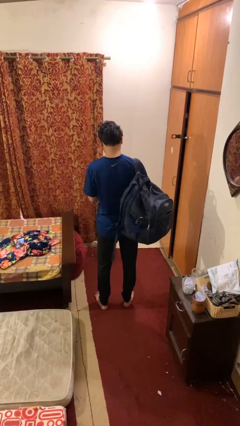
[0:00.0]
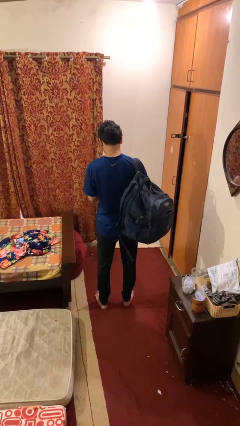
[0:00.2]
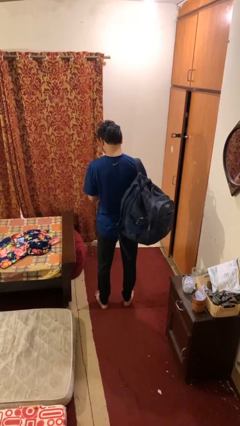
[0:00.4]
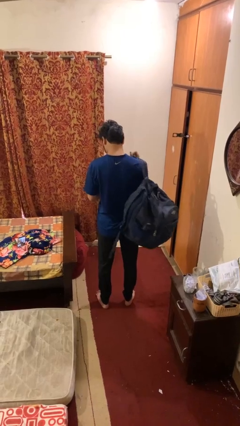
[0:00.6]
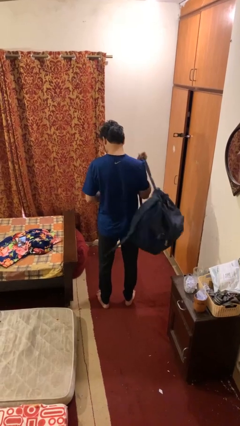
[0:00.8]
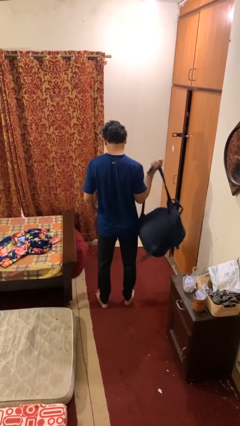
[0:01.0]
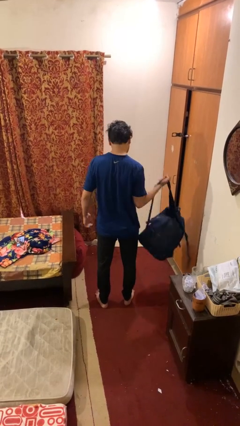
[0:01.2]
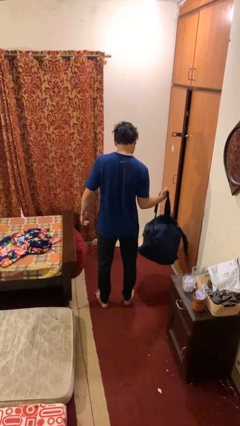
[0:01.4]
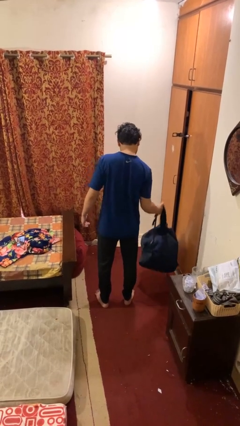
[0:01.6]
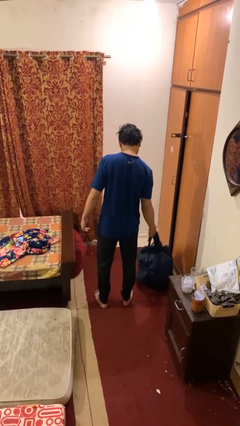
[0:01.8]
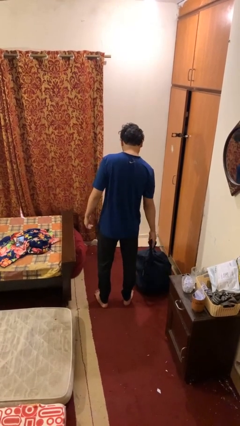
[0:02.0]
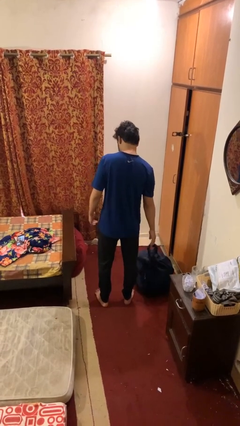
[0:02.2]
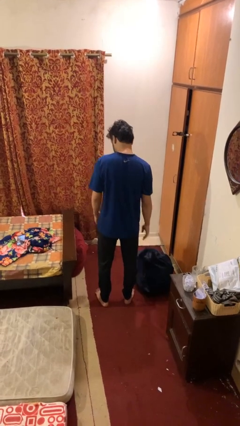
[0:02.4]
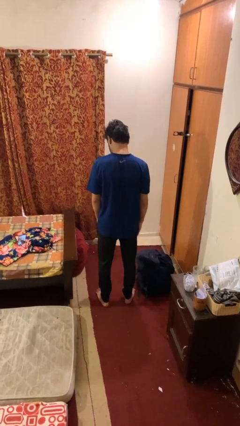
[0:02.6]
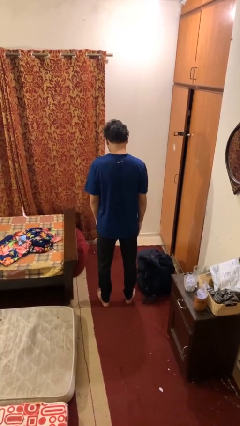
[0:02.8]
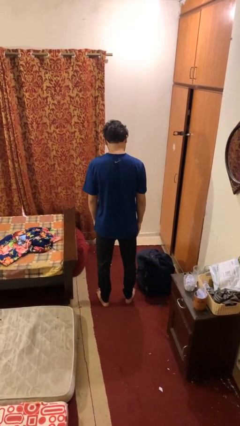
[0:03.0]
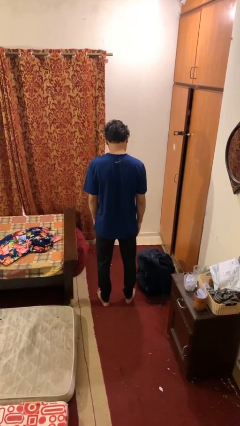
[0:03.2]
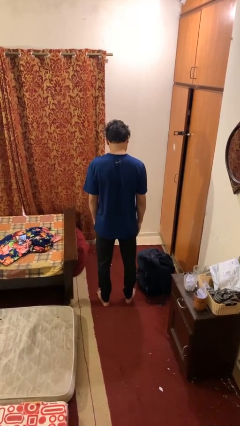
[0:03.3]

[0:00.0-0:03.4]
person takes off backpack

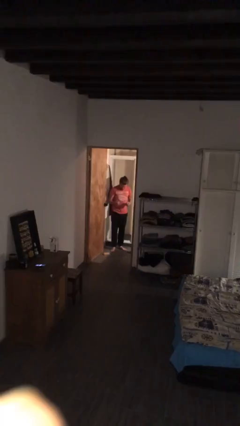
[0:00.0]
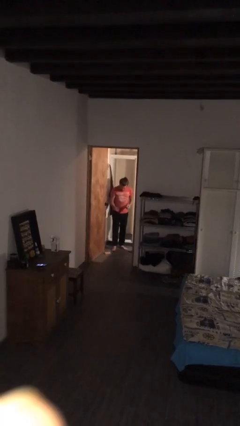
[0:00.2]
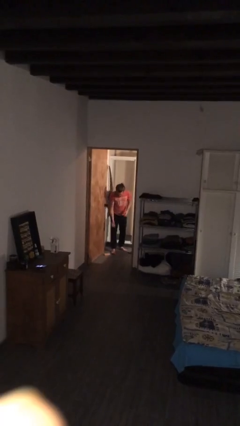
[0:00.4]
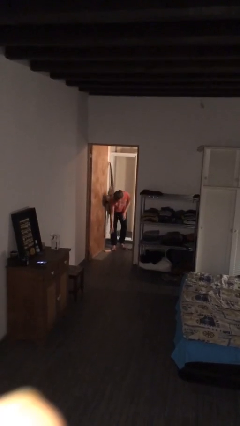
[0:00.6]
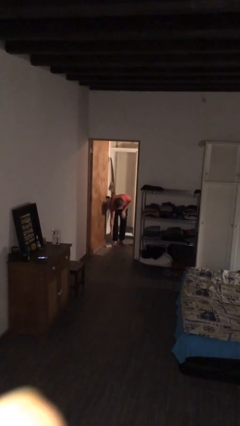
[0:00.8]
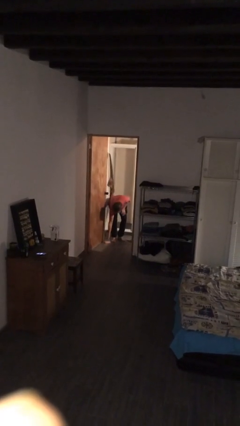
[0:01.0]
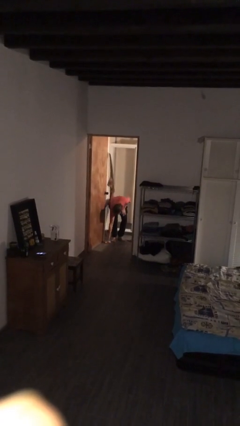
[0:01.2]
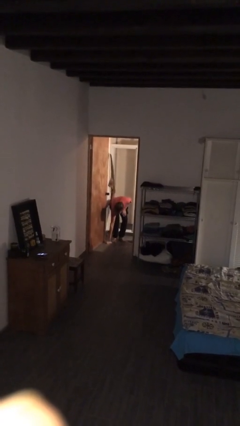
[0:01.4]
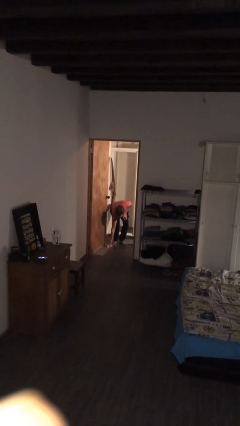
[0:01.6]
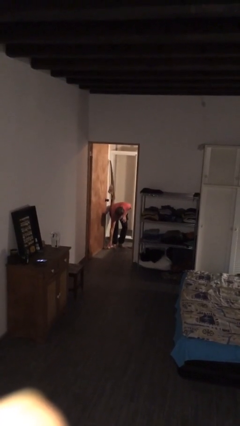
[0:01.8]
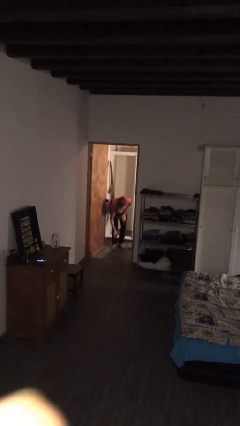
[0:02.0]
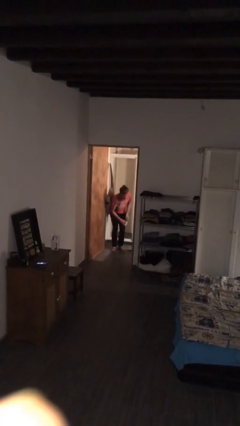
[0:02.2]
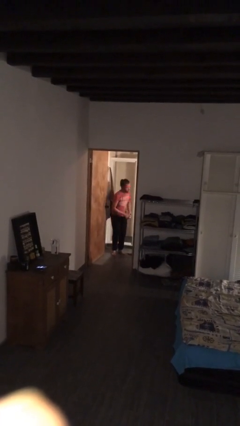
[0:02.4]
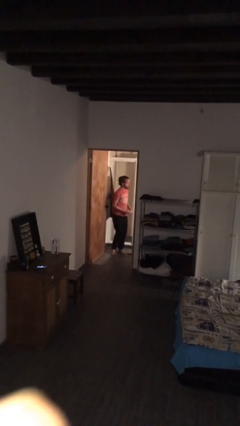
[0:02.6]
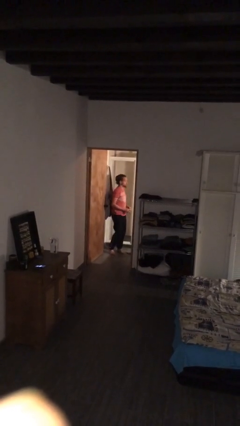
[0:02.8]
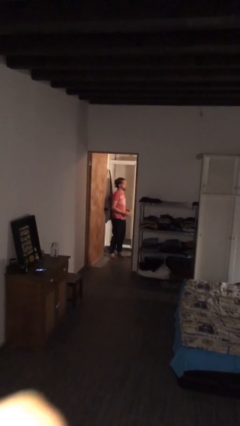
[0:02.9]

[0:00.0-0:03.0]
person picks up object from floor

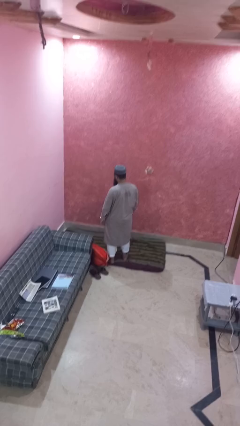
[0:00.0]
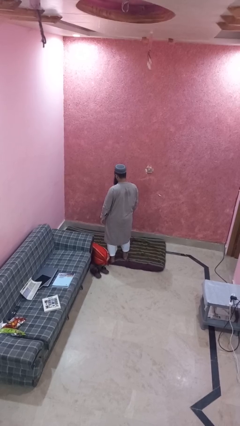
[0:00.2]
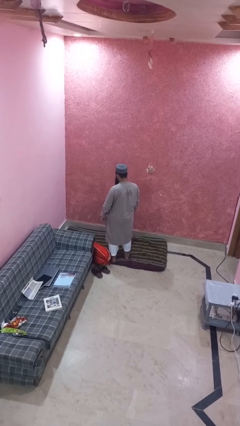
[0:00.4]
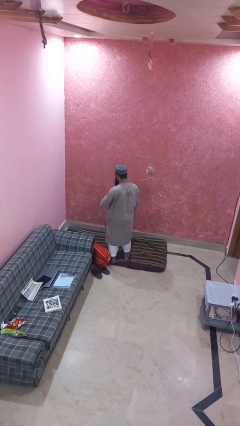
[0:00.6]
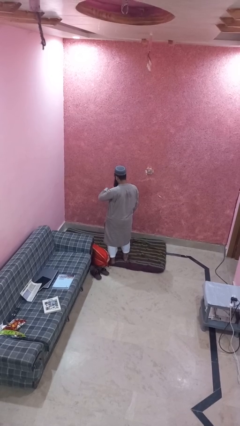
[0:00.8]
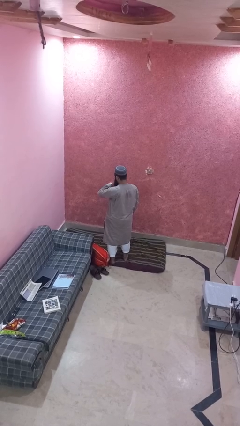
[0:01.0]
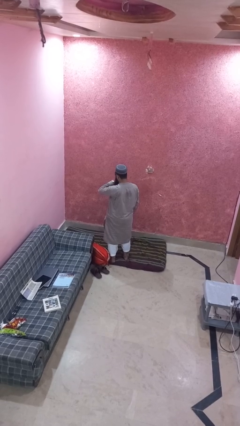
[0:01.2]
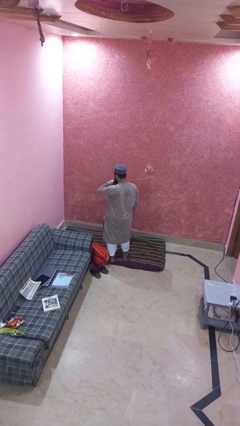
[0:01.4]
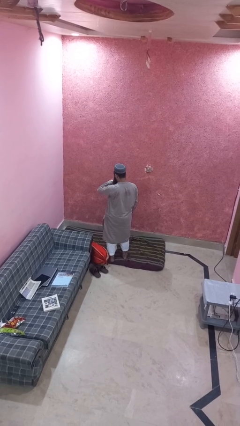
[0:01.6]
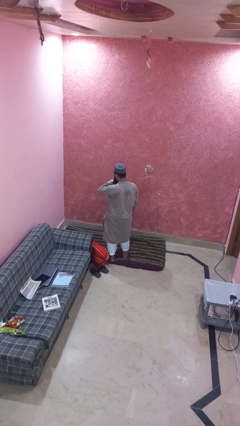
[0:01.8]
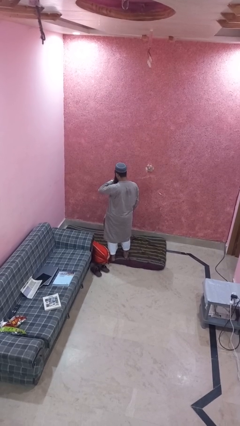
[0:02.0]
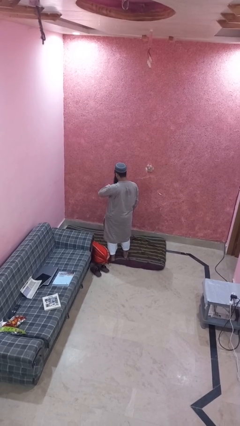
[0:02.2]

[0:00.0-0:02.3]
person looks at wristwatch

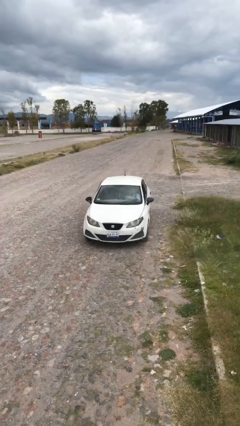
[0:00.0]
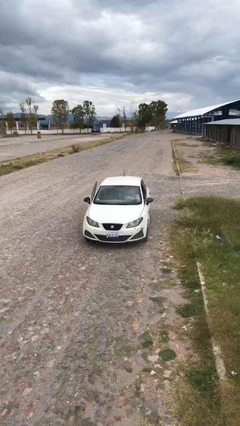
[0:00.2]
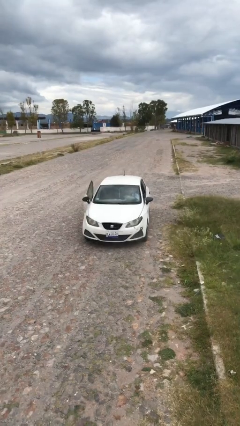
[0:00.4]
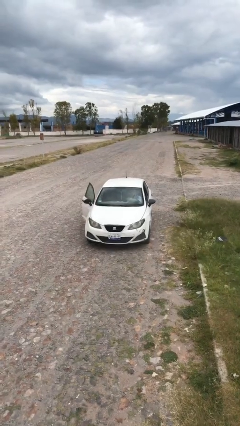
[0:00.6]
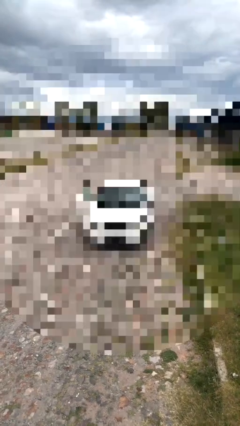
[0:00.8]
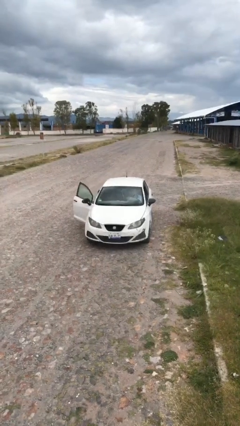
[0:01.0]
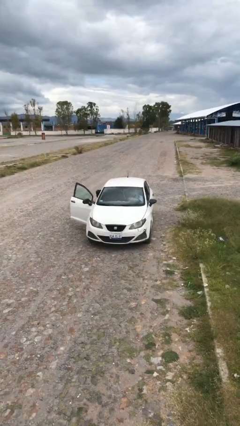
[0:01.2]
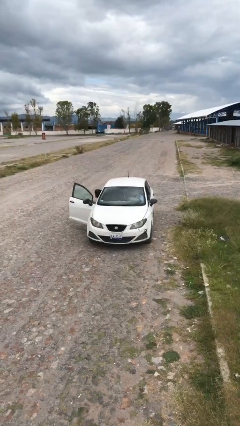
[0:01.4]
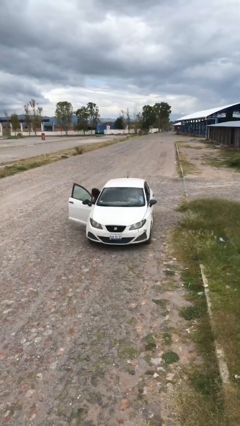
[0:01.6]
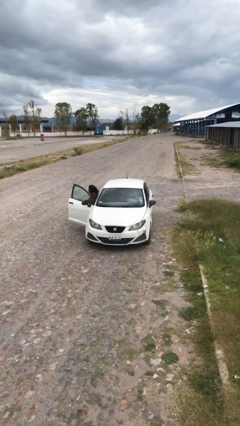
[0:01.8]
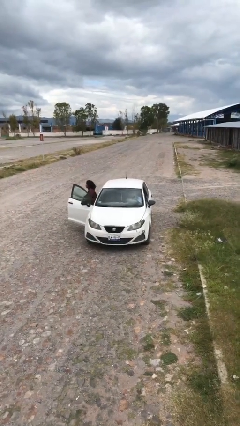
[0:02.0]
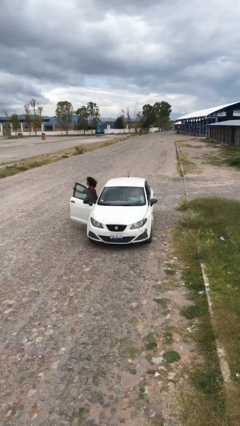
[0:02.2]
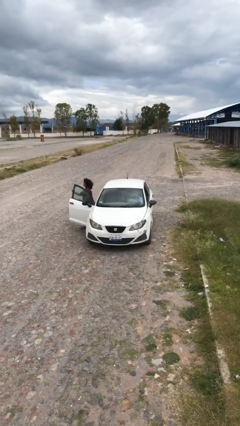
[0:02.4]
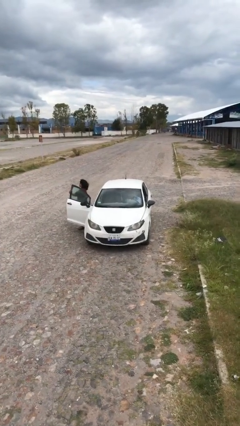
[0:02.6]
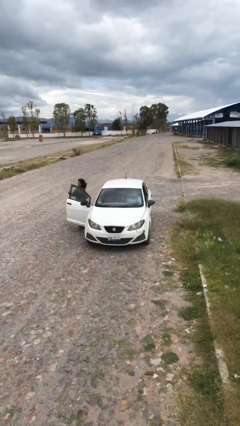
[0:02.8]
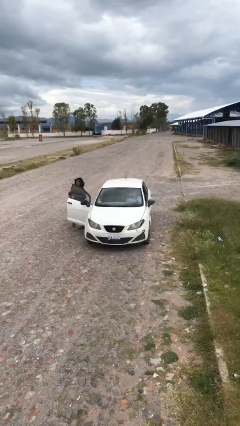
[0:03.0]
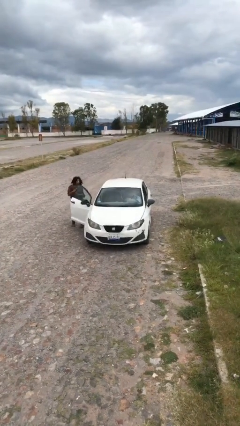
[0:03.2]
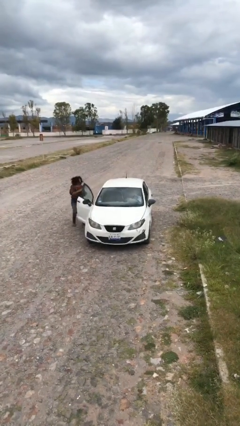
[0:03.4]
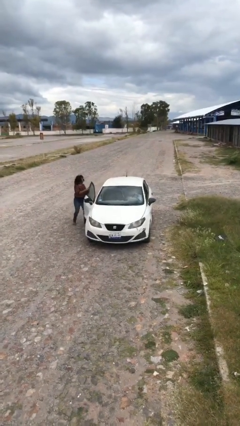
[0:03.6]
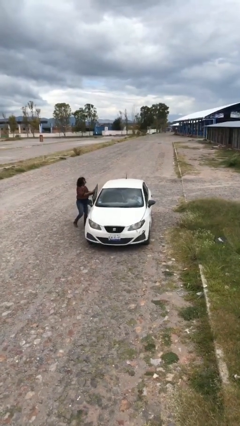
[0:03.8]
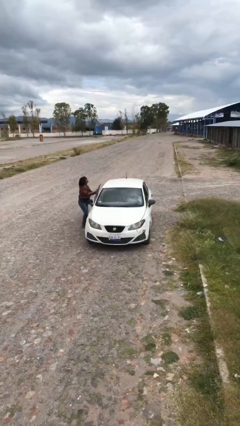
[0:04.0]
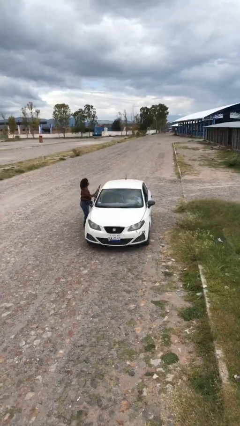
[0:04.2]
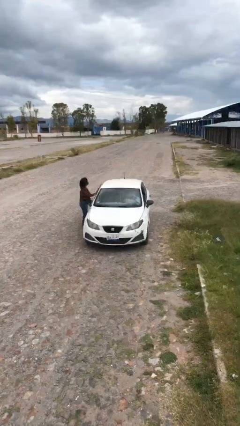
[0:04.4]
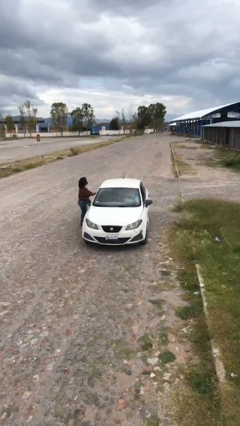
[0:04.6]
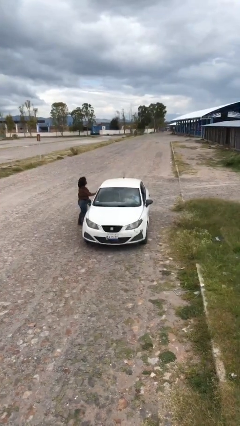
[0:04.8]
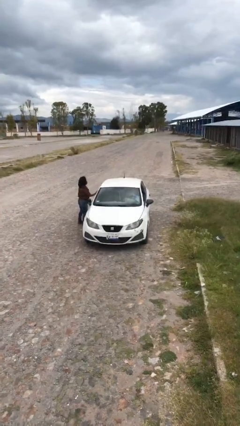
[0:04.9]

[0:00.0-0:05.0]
car drops off person

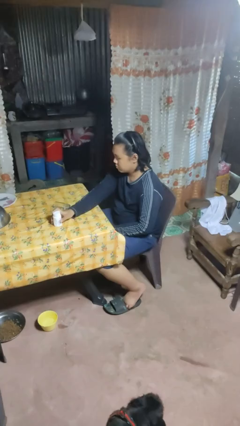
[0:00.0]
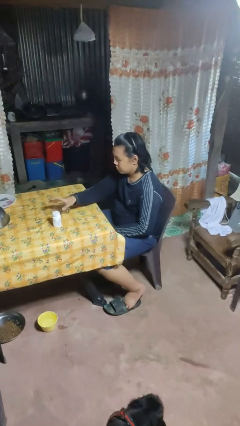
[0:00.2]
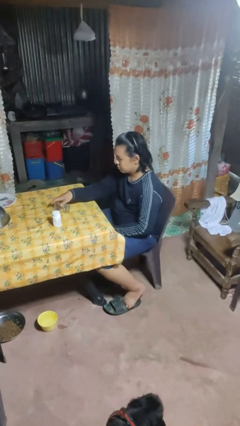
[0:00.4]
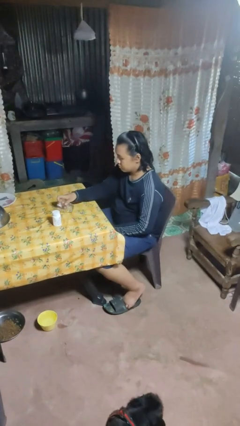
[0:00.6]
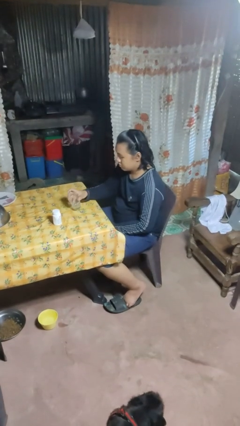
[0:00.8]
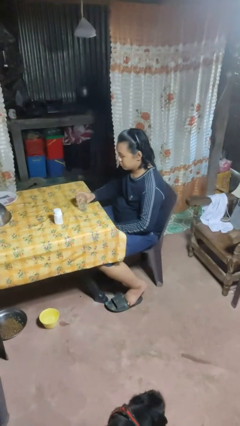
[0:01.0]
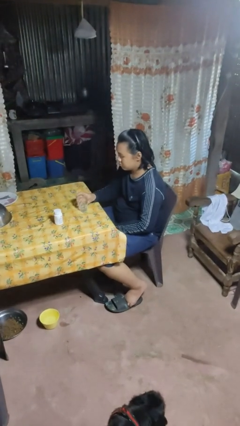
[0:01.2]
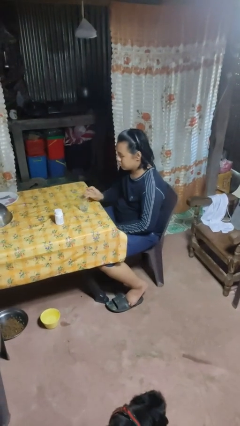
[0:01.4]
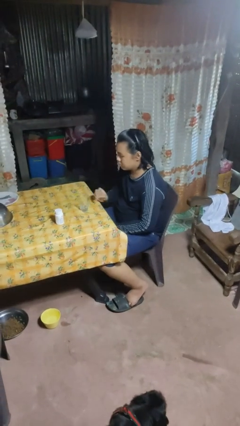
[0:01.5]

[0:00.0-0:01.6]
person sets upright glass

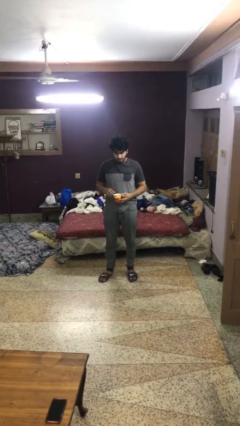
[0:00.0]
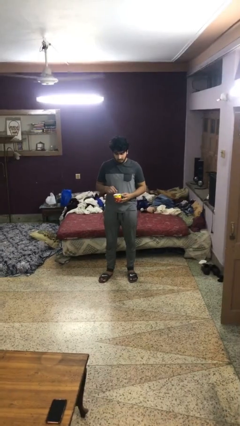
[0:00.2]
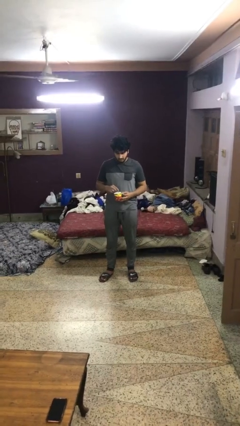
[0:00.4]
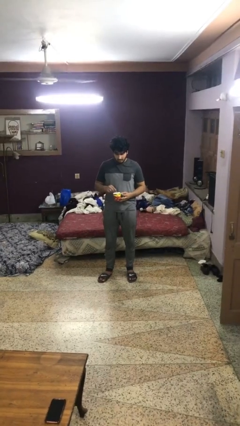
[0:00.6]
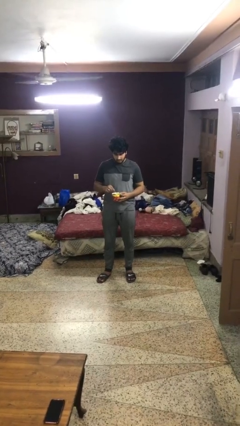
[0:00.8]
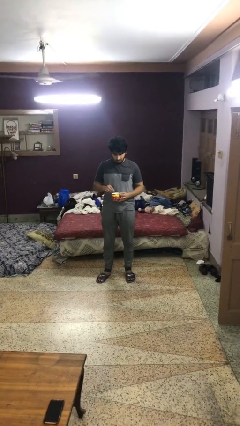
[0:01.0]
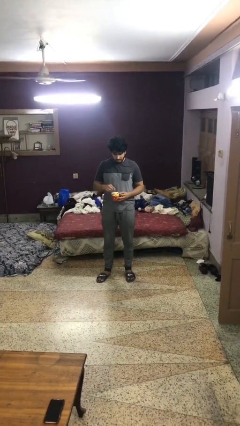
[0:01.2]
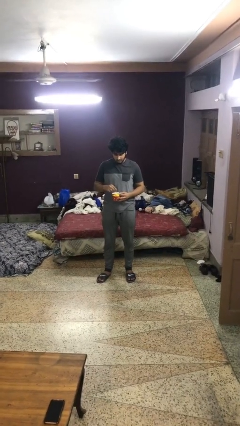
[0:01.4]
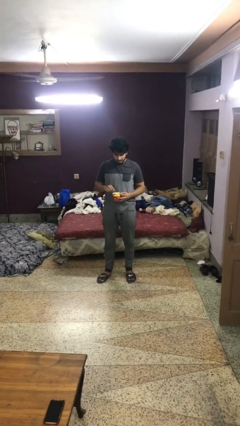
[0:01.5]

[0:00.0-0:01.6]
person stirs mug

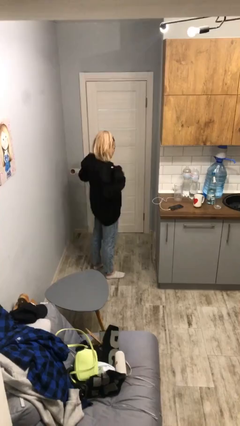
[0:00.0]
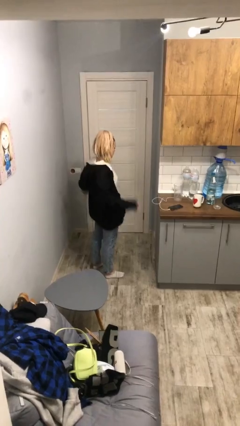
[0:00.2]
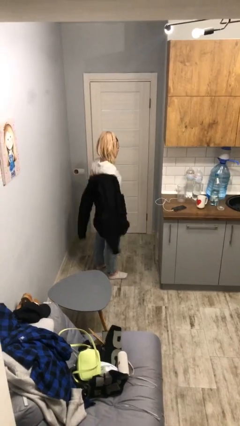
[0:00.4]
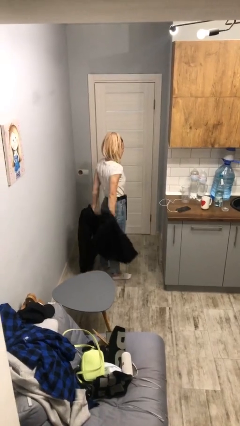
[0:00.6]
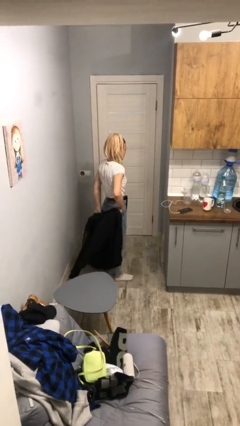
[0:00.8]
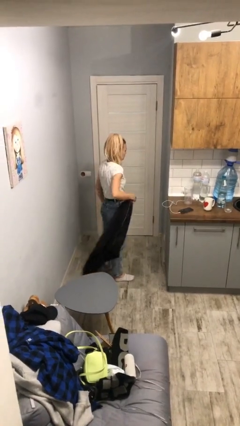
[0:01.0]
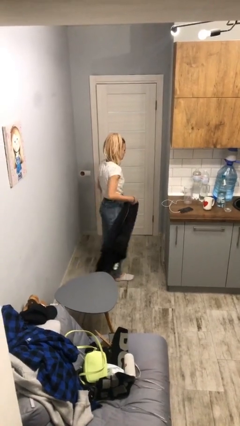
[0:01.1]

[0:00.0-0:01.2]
person takes off jacket
